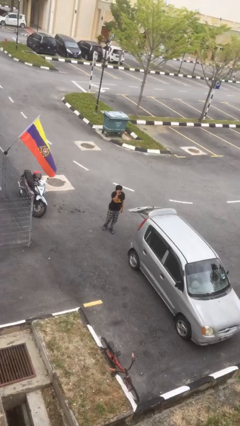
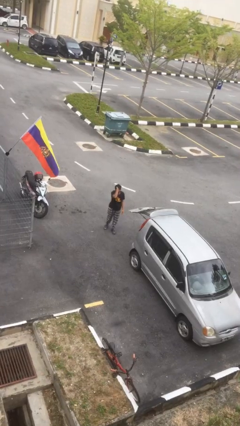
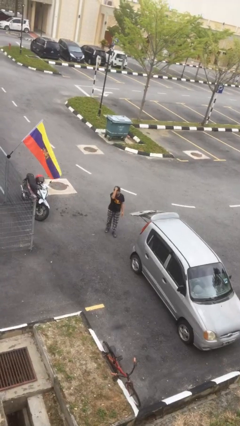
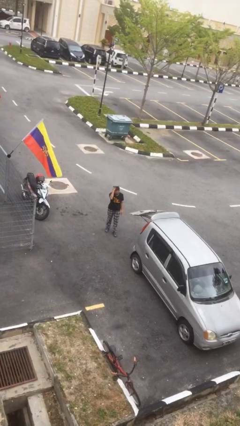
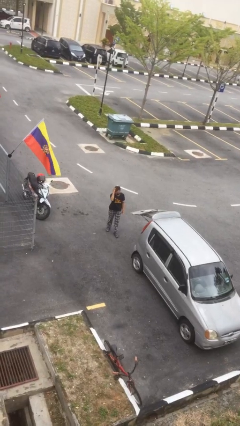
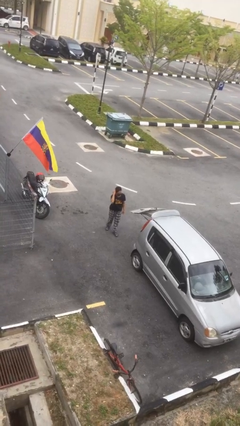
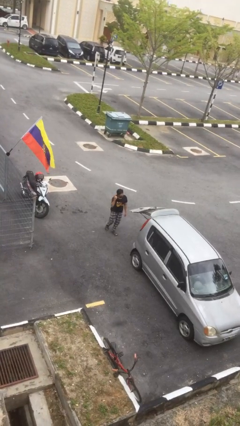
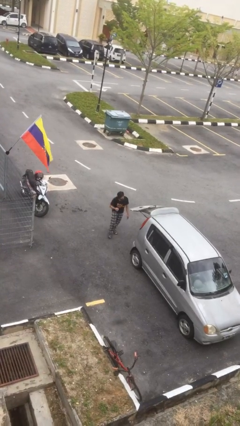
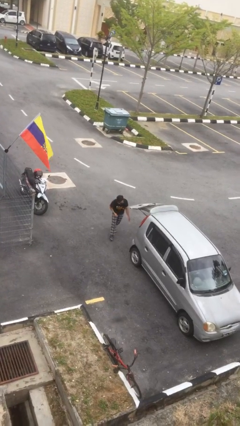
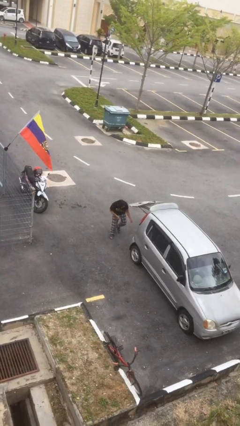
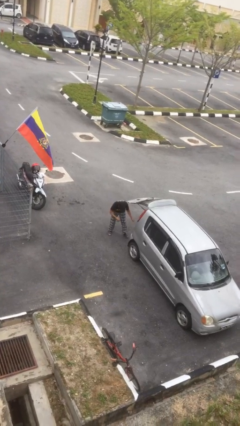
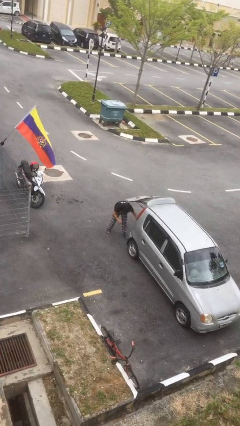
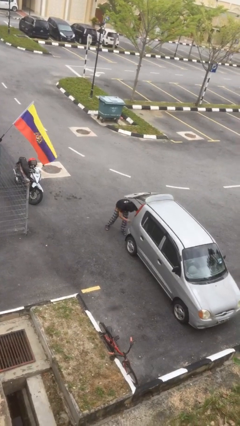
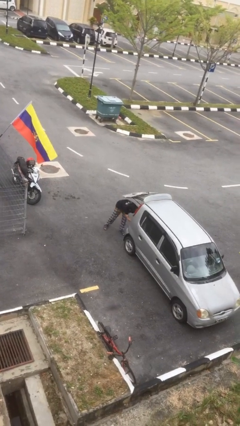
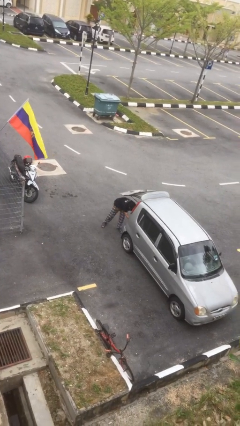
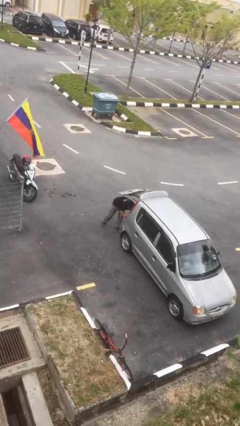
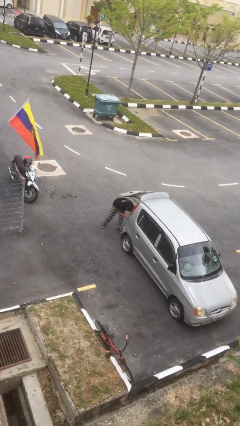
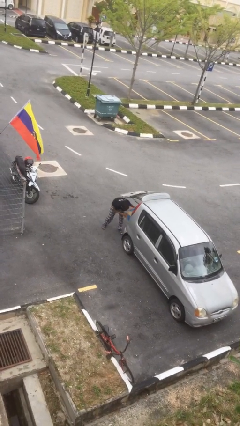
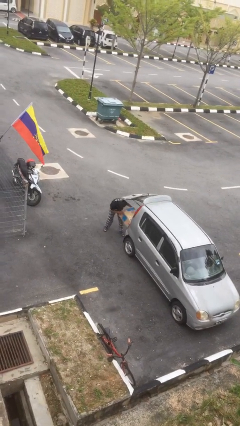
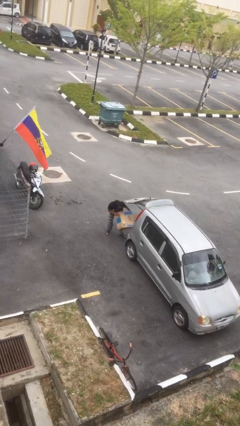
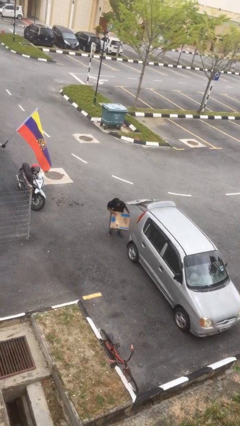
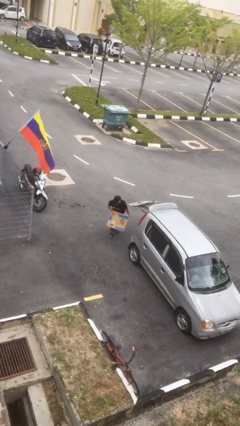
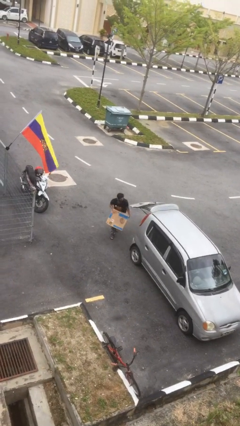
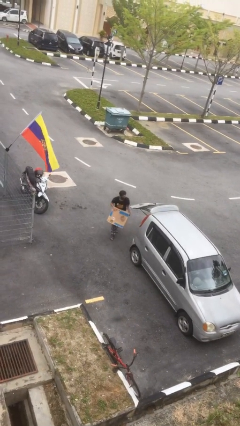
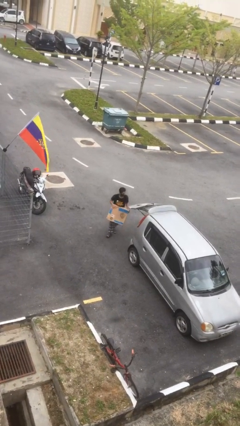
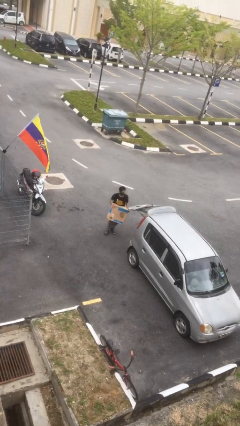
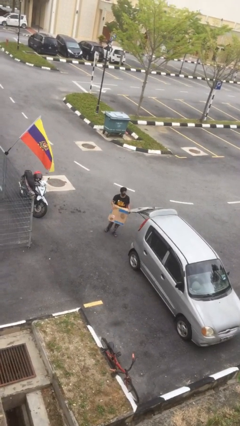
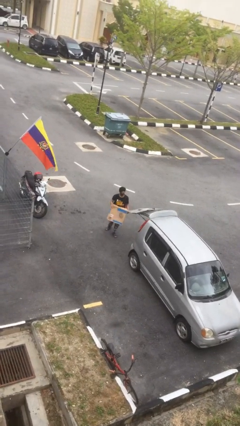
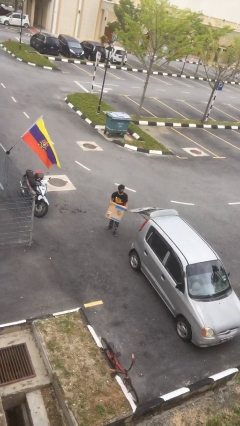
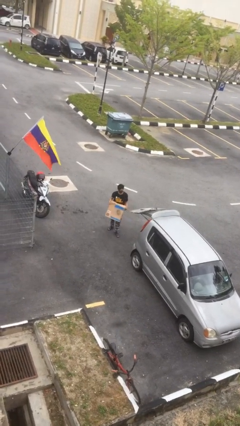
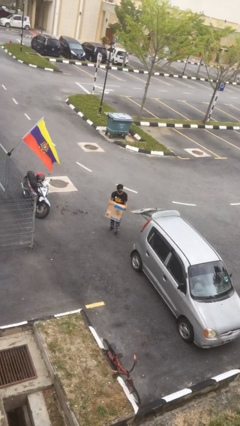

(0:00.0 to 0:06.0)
person unloads car

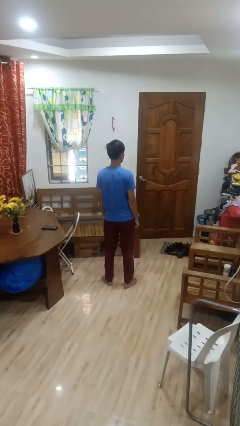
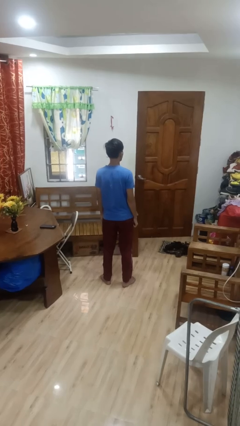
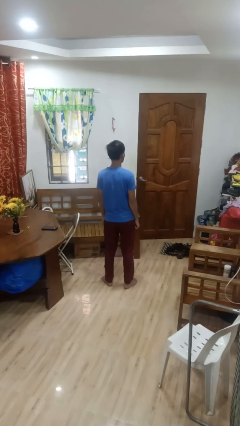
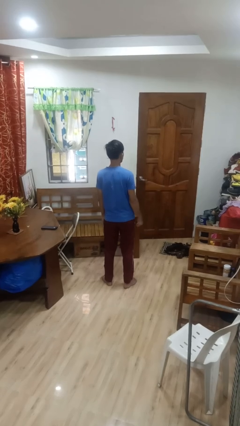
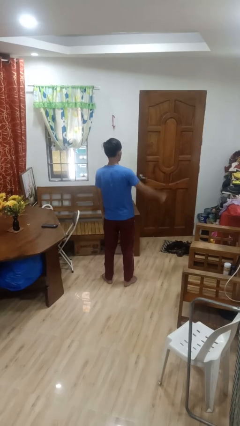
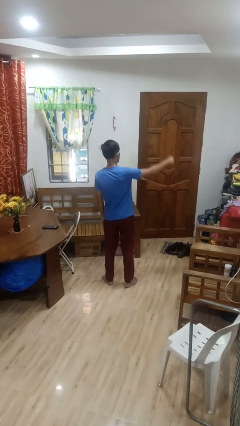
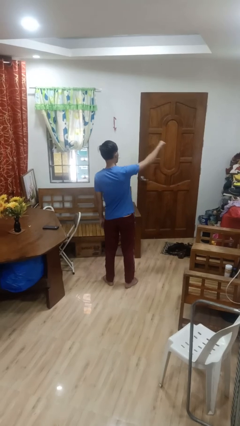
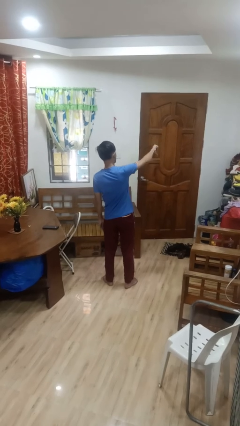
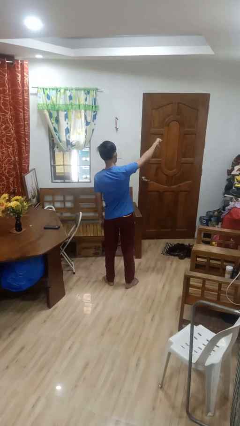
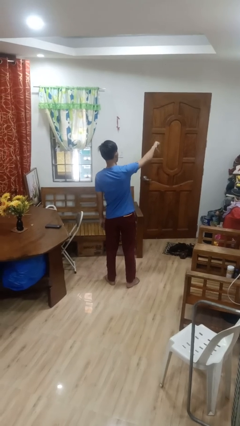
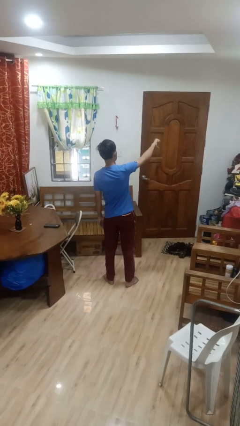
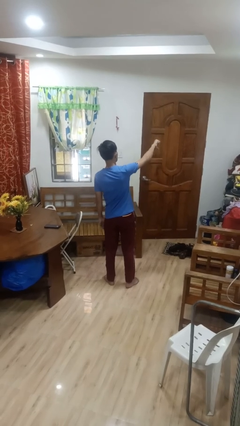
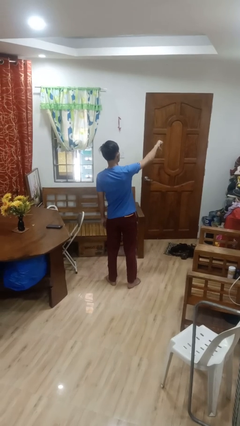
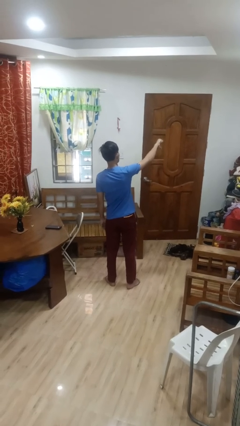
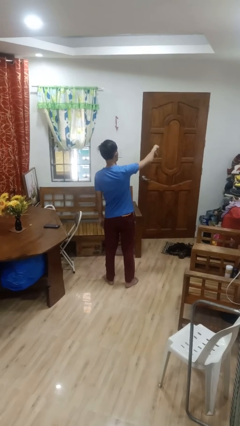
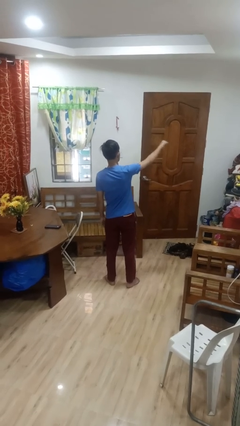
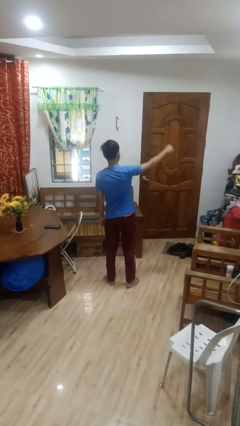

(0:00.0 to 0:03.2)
person gestures thumbs down

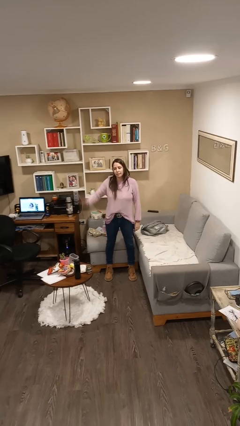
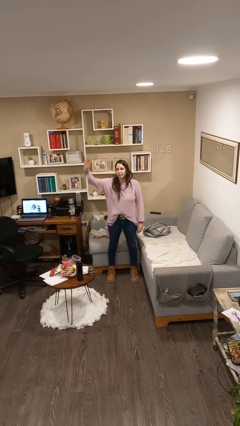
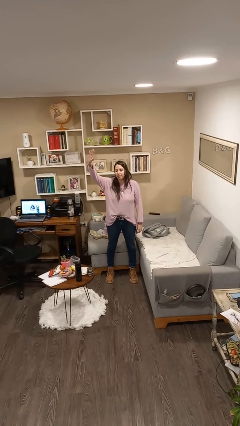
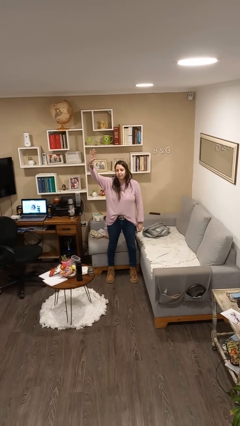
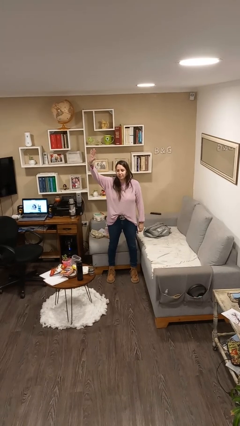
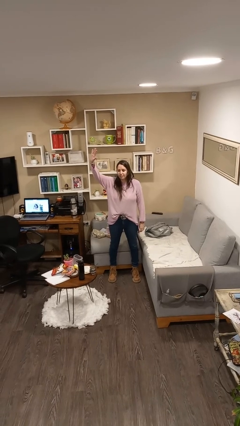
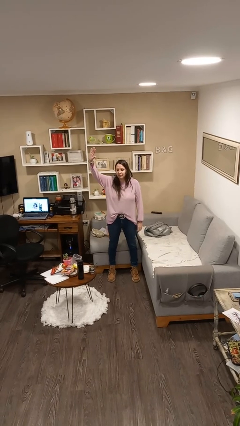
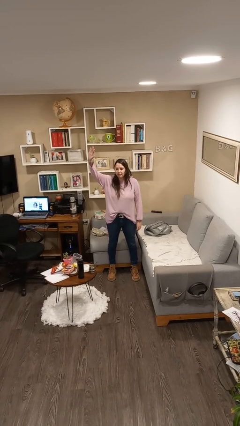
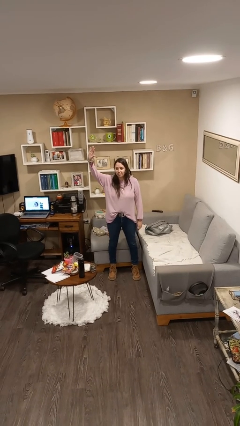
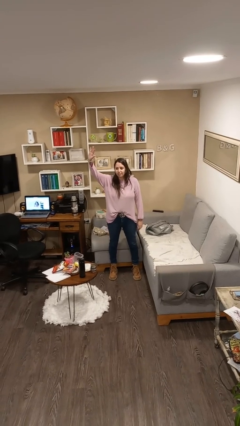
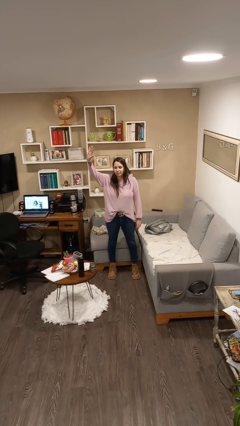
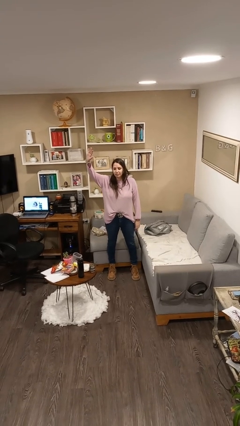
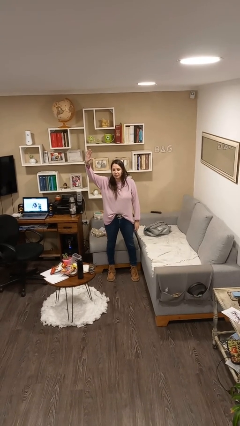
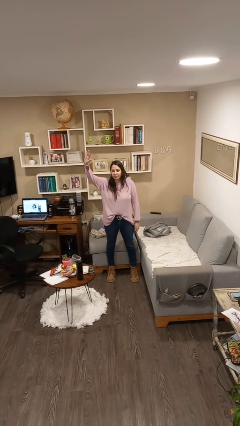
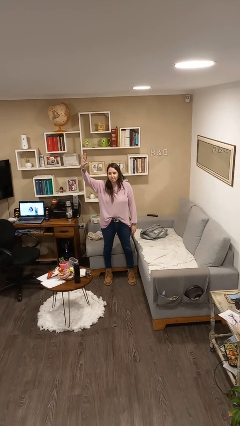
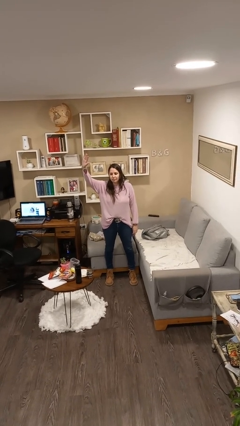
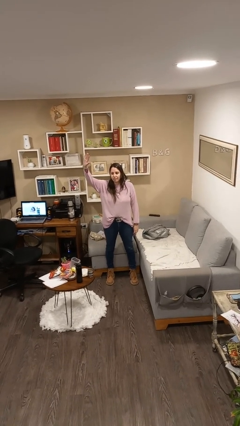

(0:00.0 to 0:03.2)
person gestures raise hand

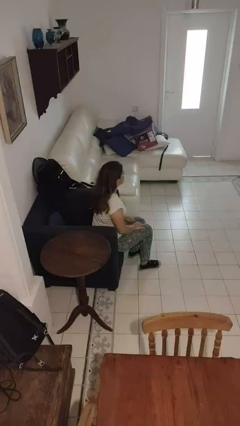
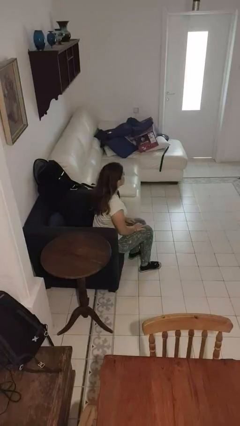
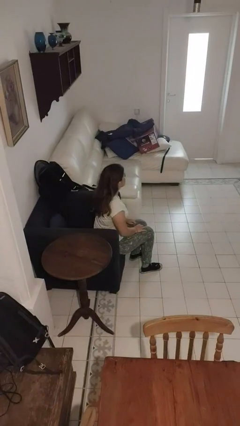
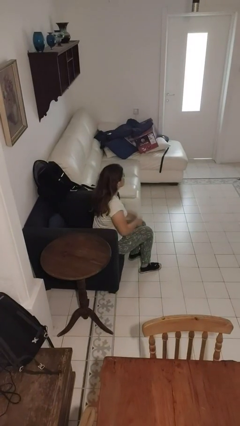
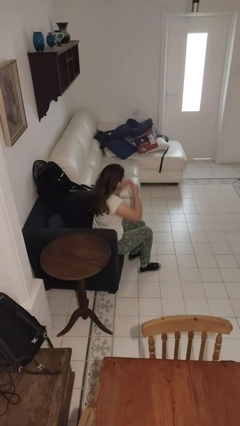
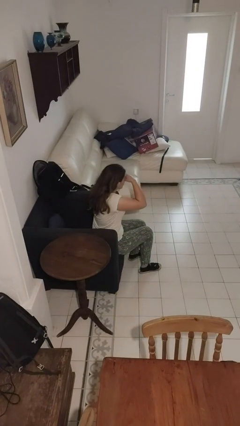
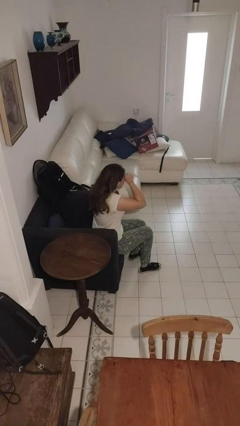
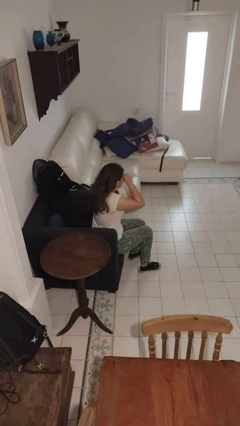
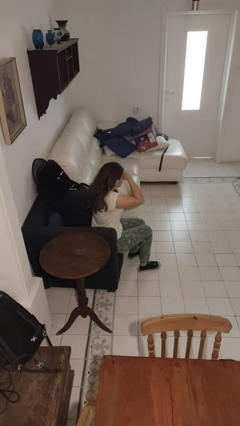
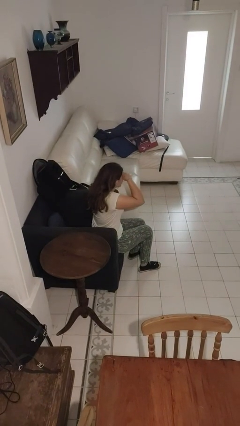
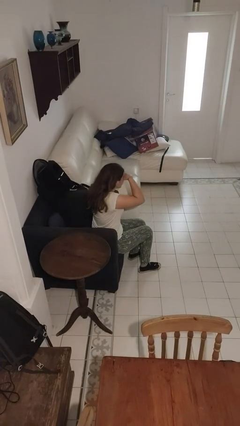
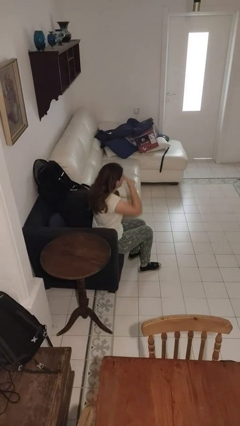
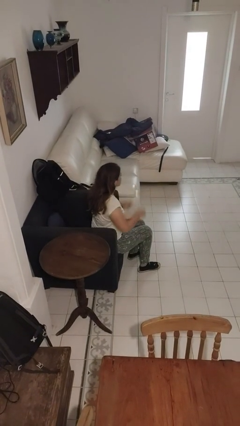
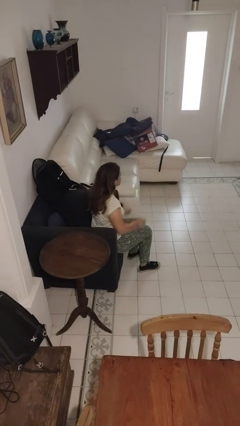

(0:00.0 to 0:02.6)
person rubs eyes

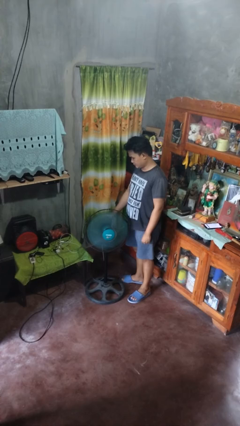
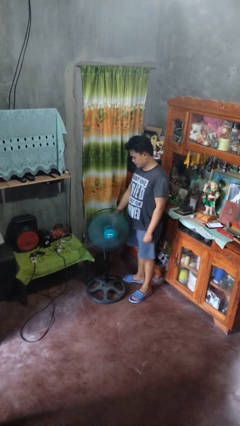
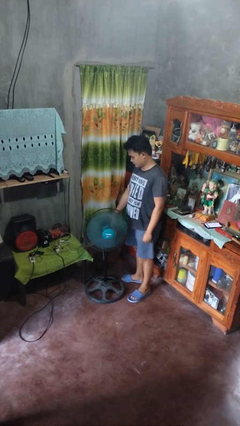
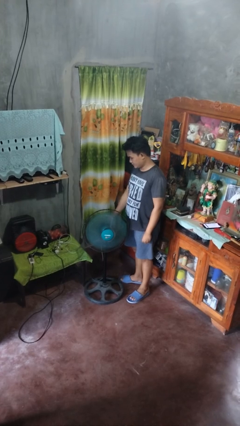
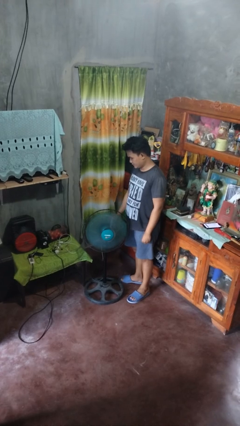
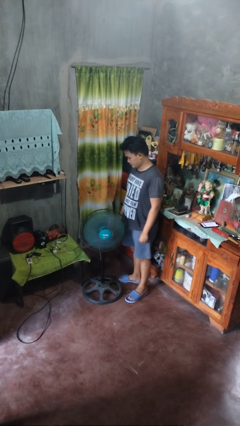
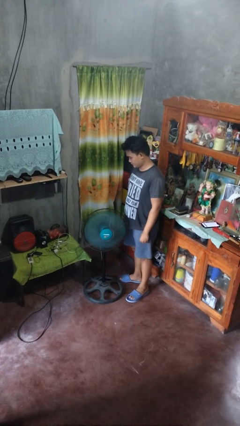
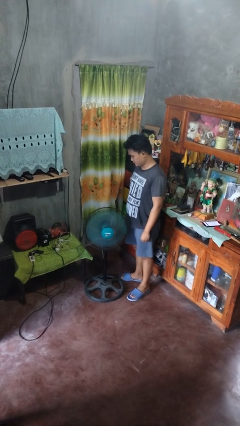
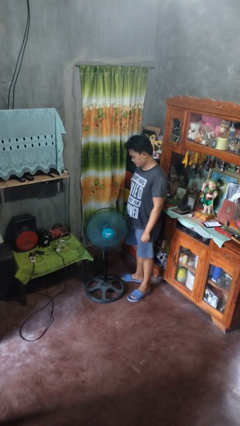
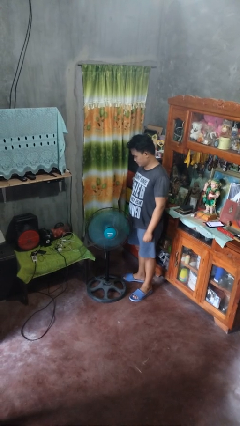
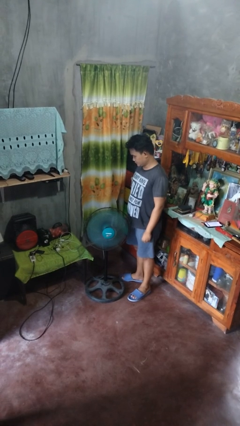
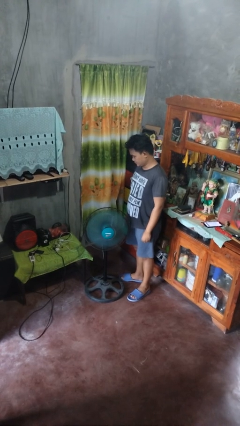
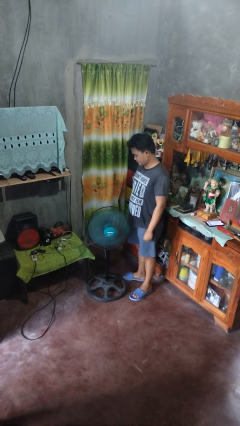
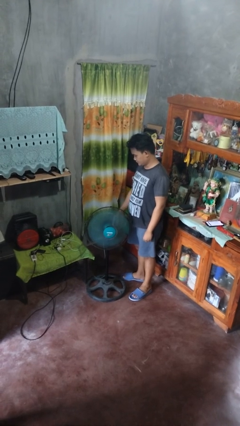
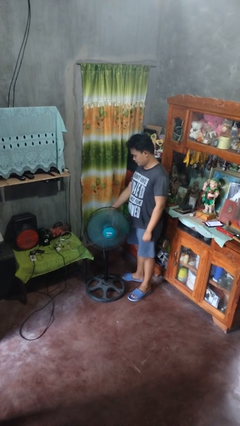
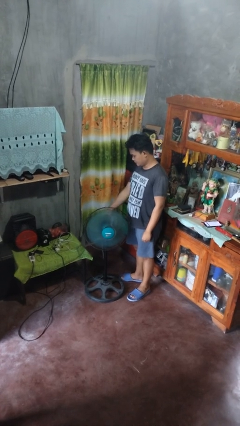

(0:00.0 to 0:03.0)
person turns on fan
